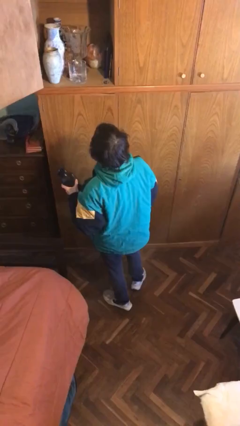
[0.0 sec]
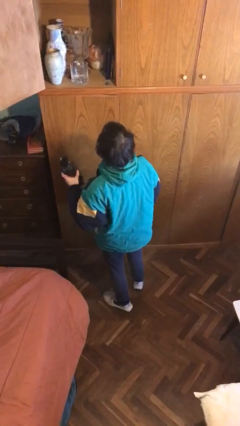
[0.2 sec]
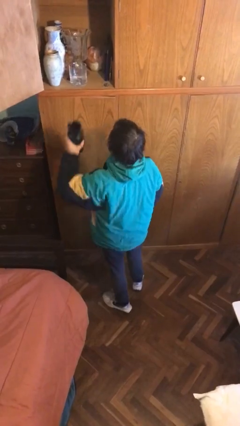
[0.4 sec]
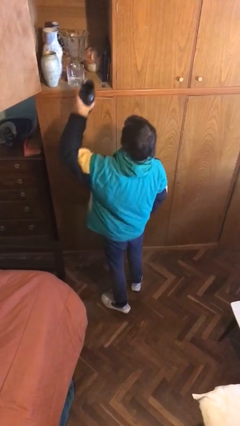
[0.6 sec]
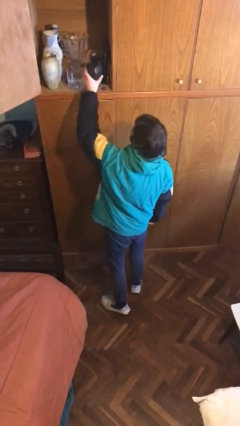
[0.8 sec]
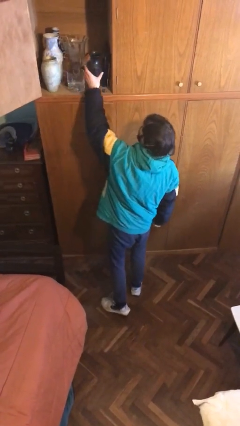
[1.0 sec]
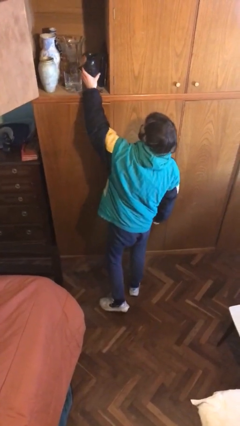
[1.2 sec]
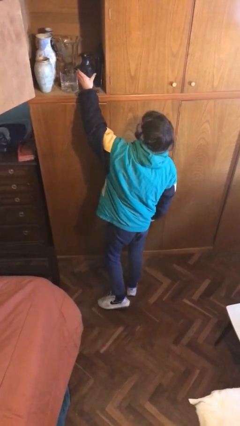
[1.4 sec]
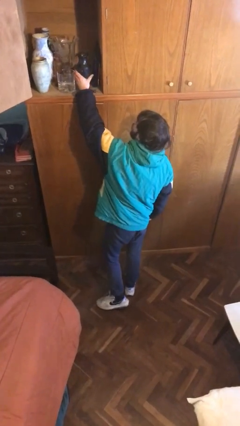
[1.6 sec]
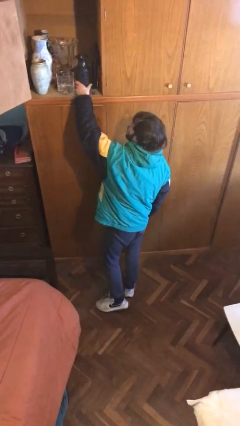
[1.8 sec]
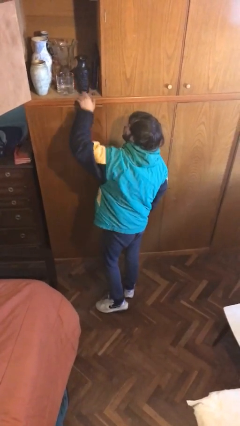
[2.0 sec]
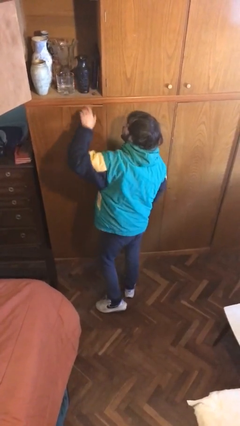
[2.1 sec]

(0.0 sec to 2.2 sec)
person puts down object into cabinet

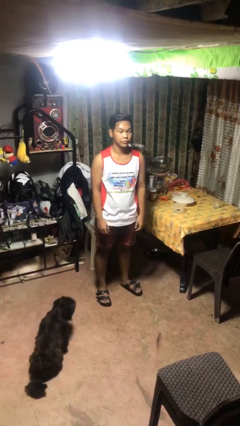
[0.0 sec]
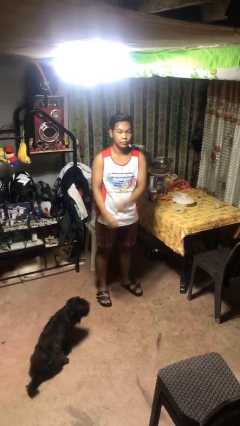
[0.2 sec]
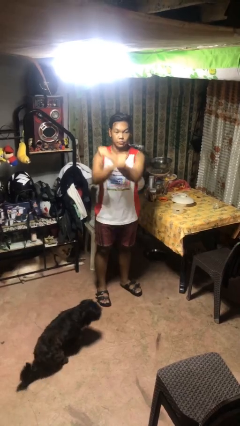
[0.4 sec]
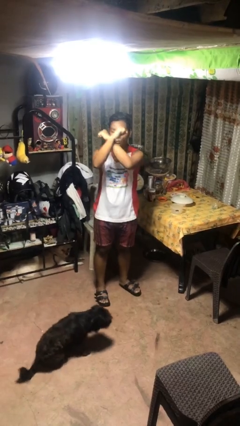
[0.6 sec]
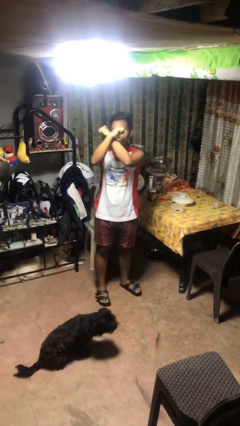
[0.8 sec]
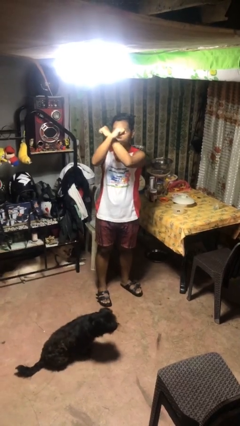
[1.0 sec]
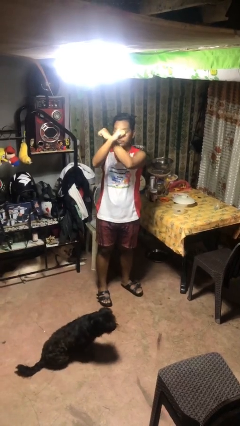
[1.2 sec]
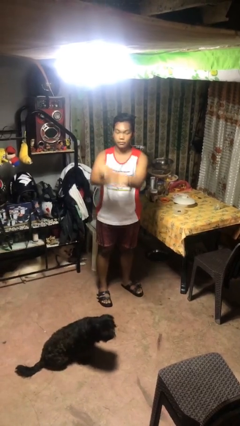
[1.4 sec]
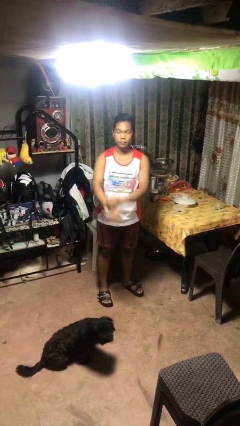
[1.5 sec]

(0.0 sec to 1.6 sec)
person gestures arms x

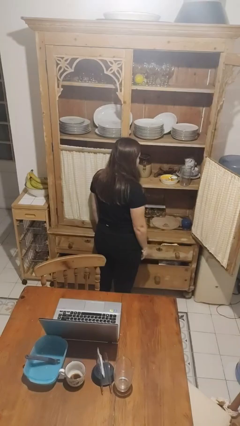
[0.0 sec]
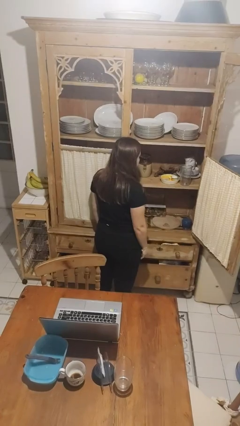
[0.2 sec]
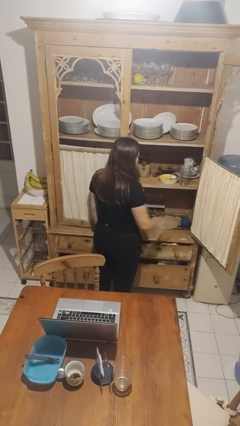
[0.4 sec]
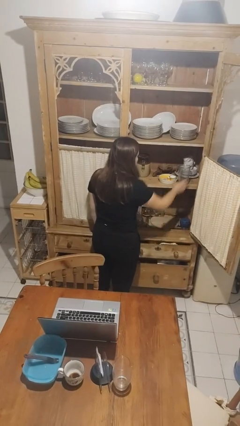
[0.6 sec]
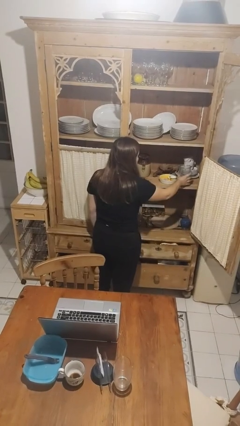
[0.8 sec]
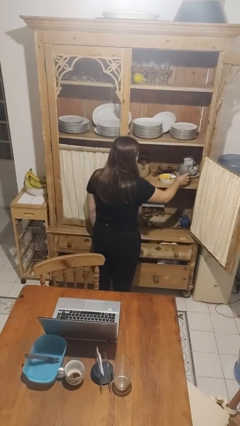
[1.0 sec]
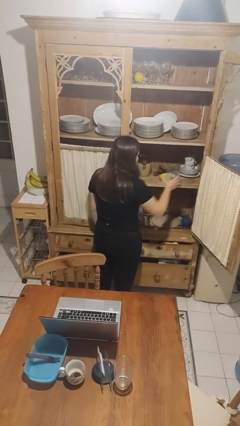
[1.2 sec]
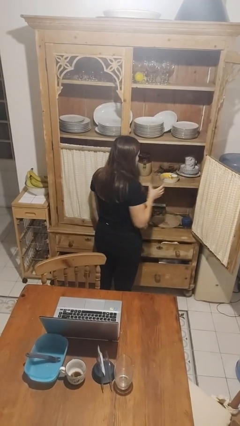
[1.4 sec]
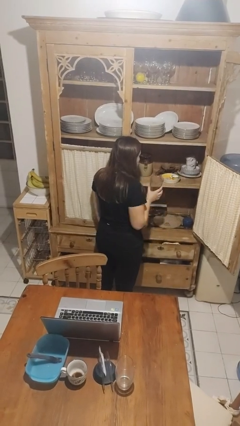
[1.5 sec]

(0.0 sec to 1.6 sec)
person takes object from cabinet

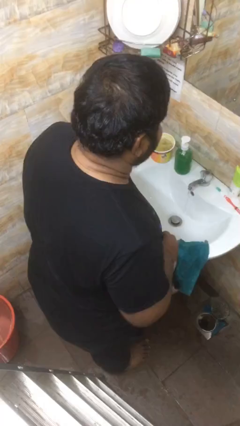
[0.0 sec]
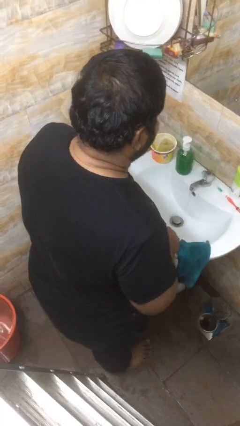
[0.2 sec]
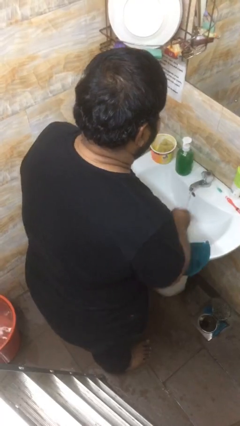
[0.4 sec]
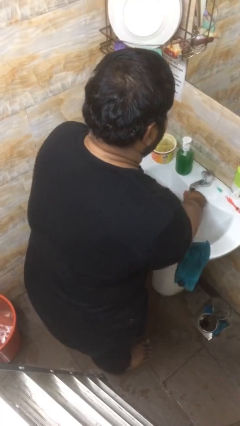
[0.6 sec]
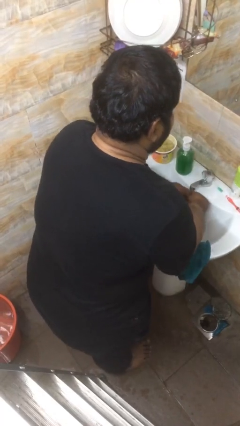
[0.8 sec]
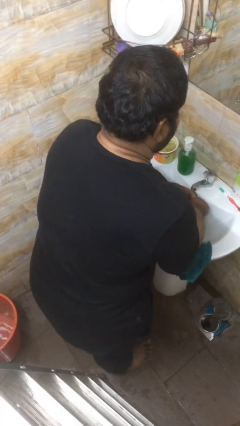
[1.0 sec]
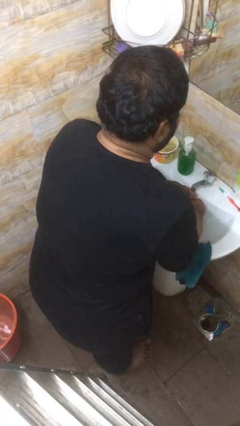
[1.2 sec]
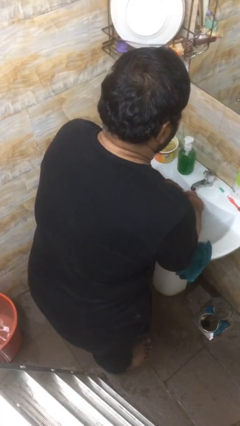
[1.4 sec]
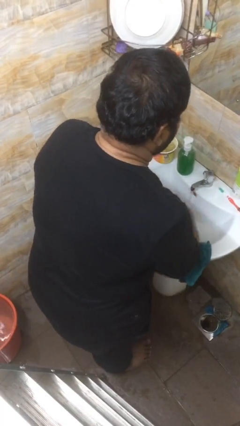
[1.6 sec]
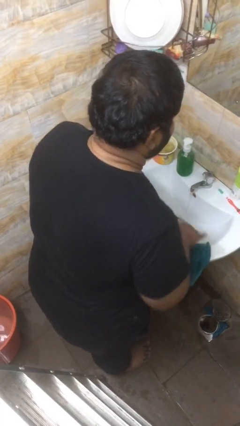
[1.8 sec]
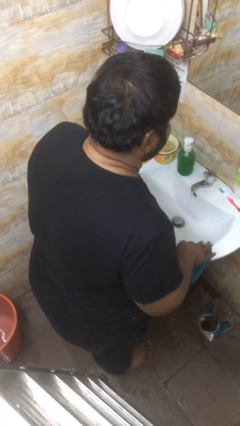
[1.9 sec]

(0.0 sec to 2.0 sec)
person washes hands

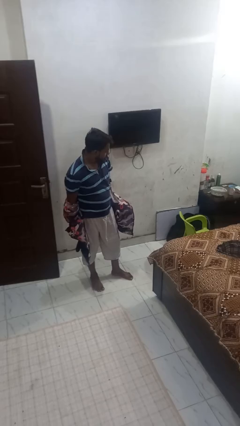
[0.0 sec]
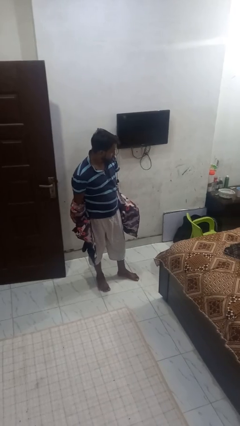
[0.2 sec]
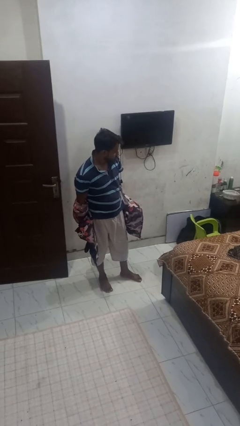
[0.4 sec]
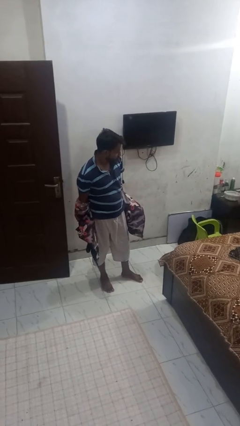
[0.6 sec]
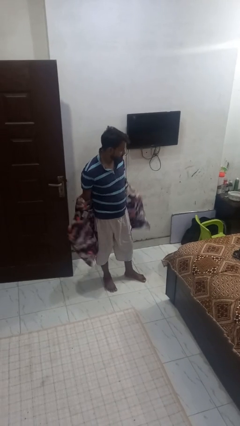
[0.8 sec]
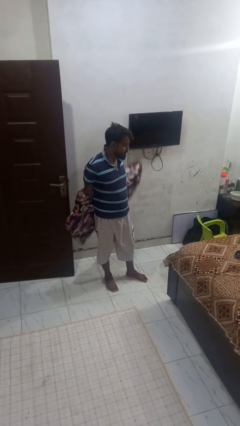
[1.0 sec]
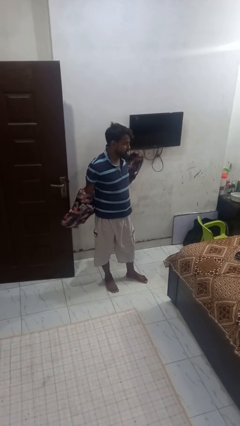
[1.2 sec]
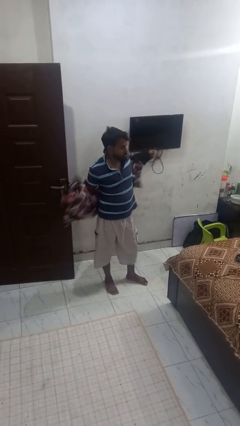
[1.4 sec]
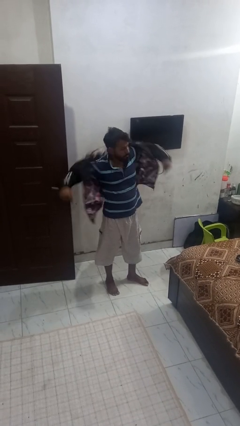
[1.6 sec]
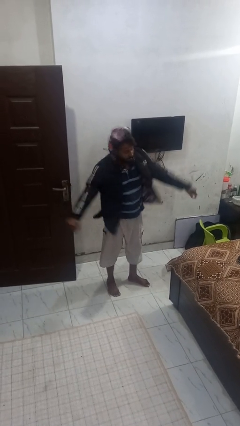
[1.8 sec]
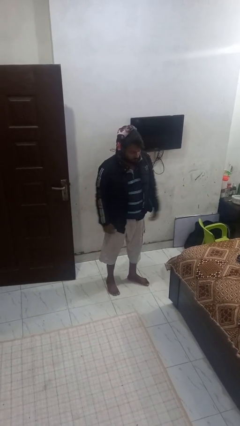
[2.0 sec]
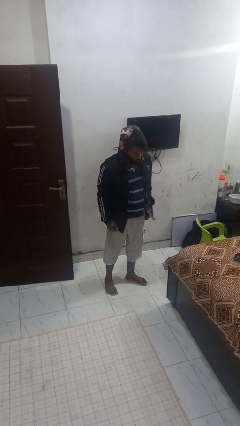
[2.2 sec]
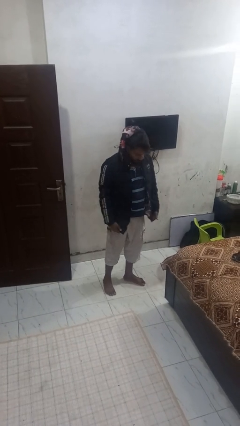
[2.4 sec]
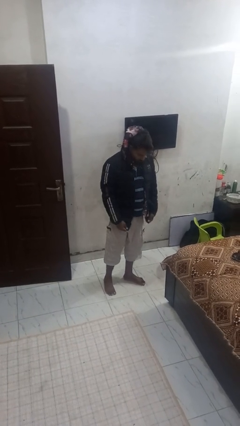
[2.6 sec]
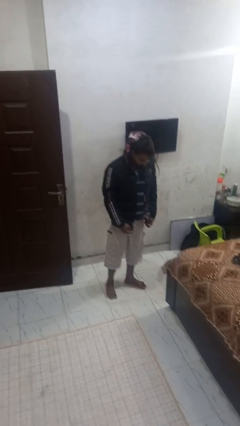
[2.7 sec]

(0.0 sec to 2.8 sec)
person puts on jacket

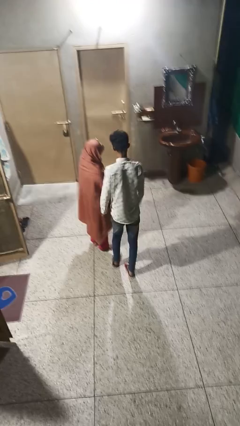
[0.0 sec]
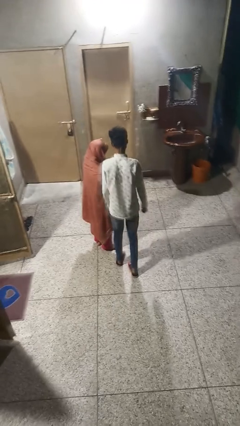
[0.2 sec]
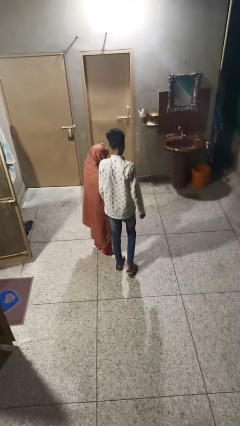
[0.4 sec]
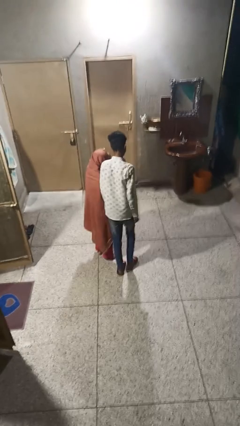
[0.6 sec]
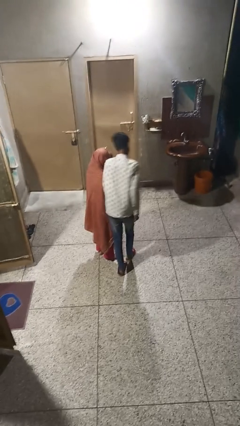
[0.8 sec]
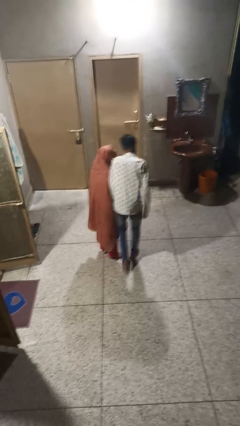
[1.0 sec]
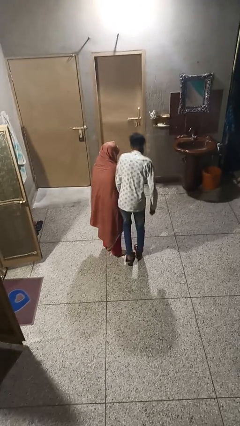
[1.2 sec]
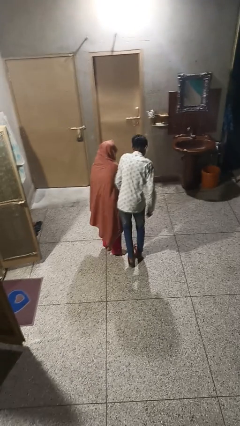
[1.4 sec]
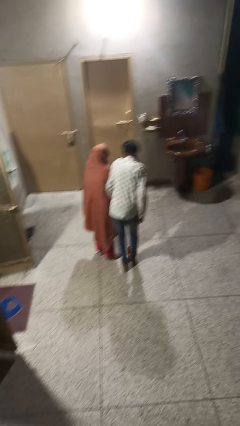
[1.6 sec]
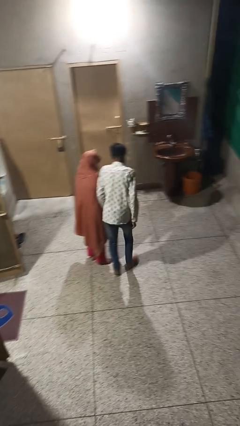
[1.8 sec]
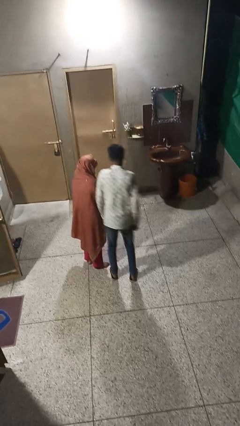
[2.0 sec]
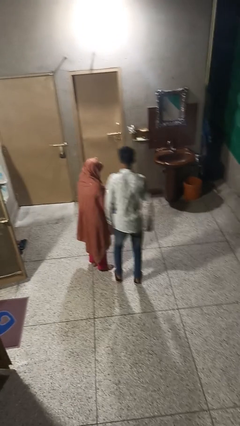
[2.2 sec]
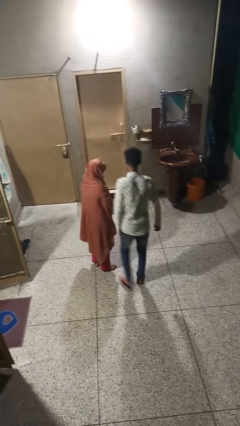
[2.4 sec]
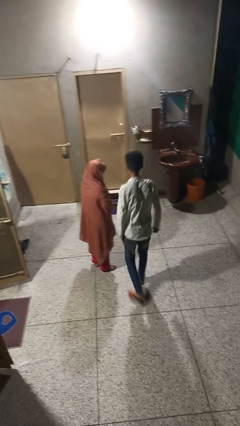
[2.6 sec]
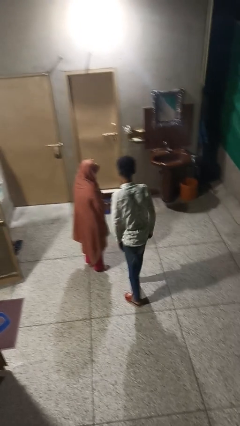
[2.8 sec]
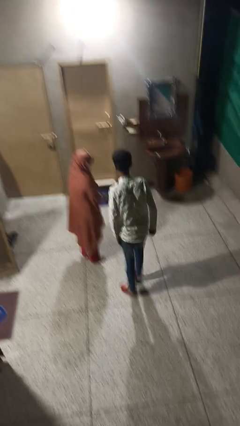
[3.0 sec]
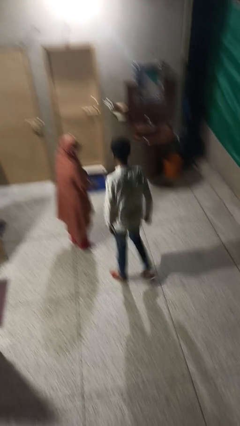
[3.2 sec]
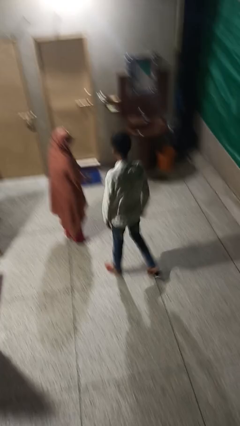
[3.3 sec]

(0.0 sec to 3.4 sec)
person bumps into person

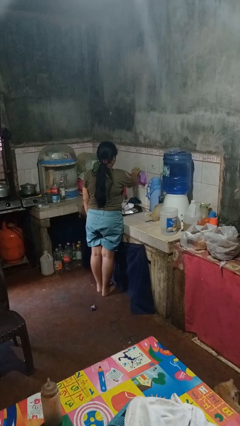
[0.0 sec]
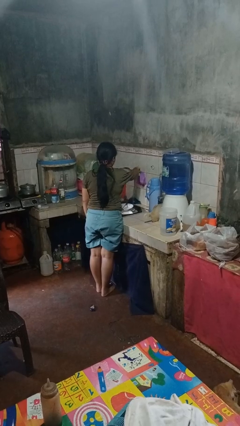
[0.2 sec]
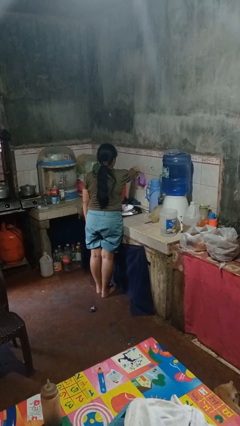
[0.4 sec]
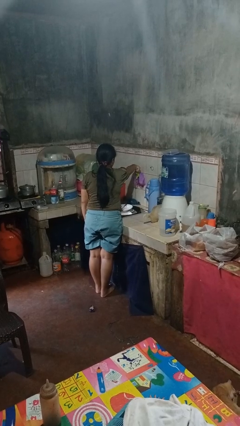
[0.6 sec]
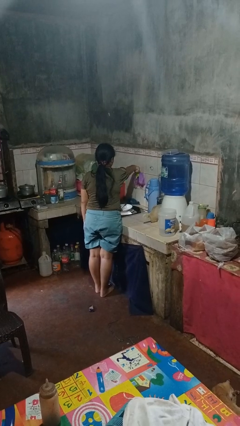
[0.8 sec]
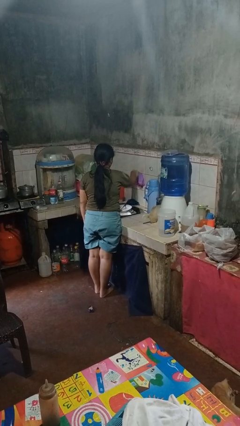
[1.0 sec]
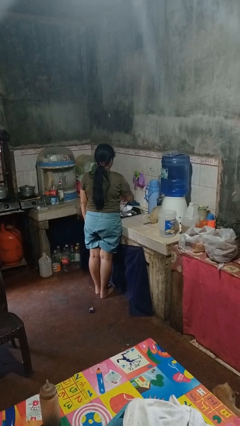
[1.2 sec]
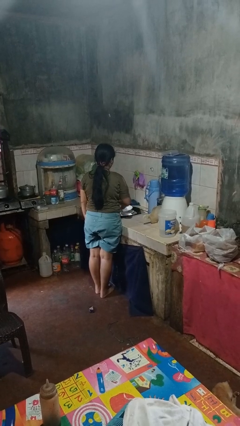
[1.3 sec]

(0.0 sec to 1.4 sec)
person turns off faucet

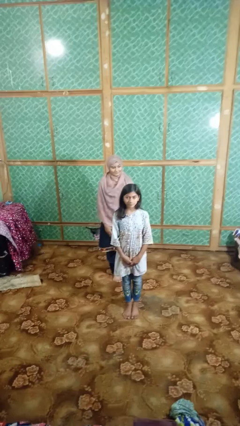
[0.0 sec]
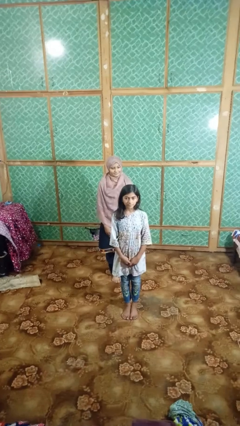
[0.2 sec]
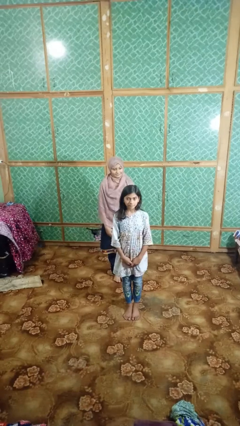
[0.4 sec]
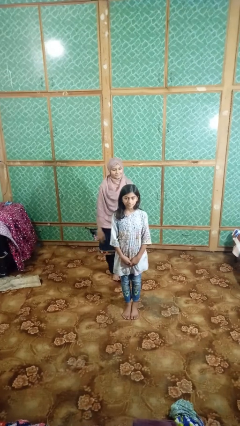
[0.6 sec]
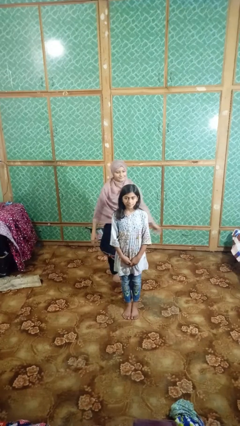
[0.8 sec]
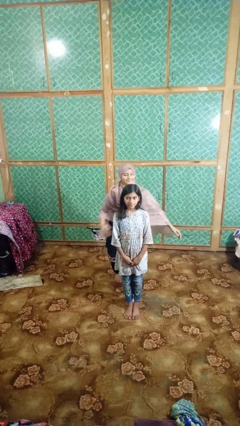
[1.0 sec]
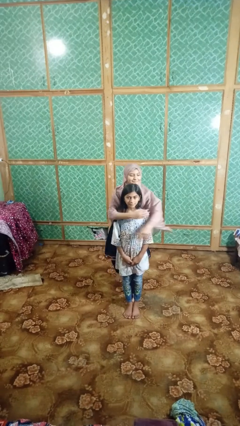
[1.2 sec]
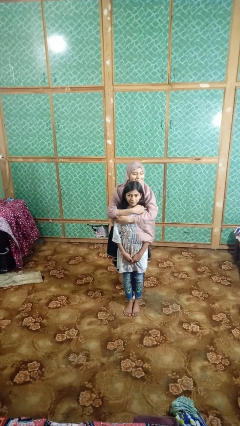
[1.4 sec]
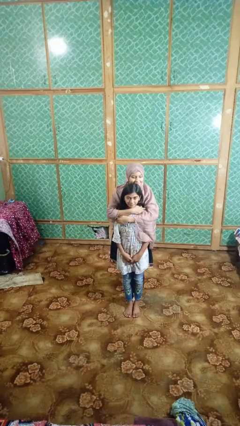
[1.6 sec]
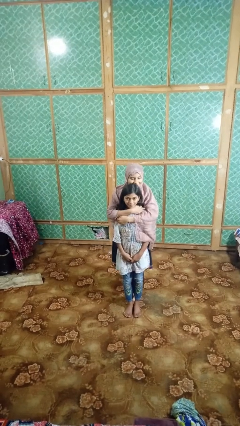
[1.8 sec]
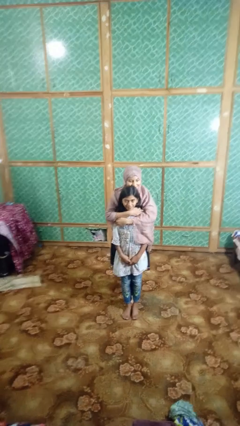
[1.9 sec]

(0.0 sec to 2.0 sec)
person hugs person from behind
